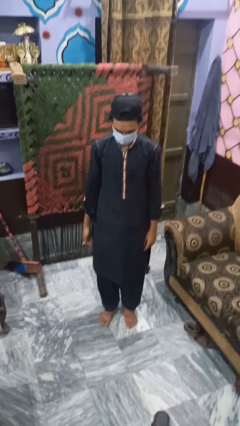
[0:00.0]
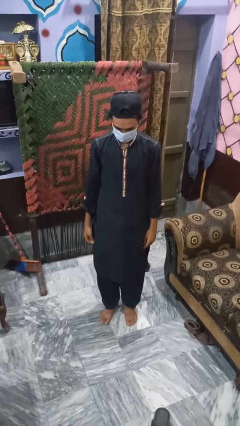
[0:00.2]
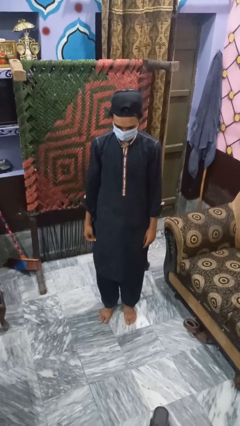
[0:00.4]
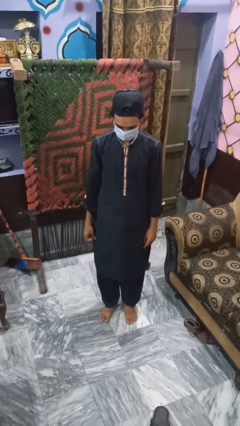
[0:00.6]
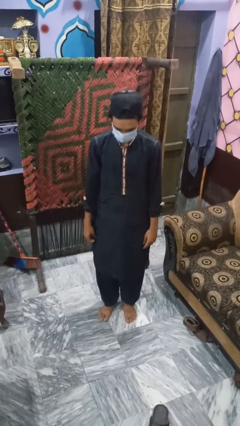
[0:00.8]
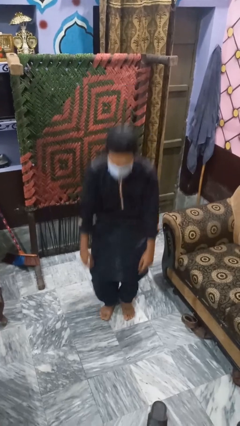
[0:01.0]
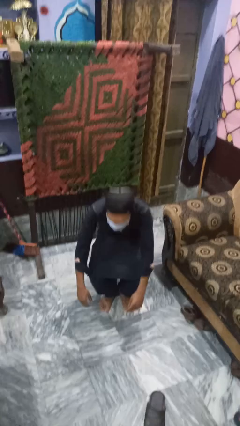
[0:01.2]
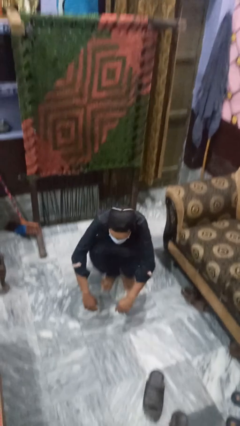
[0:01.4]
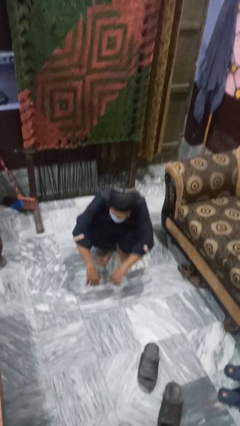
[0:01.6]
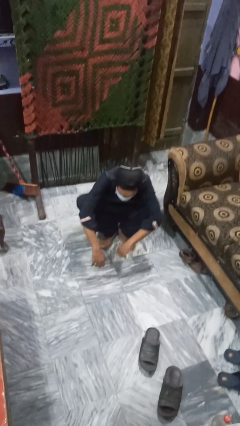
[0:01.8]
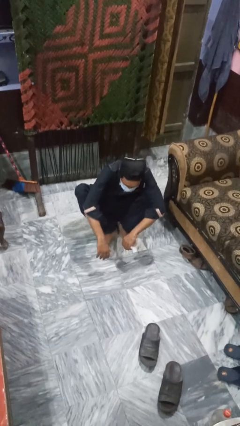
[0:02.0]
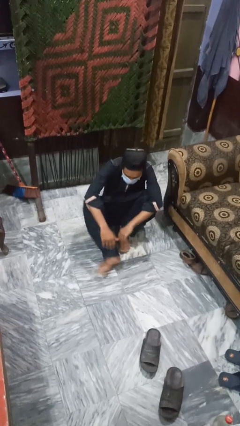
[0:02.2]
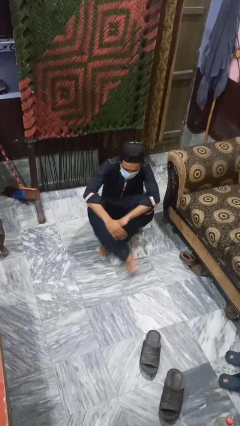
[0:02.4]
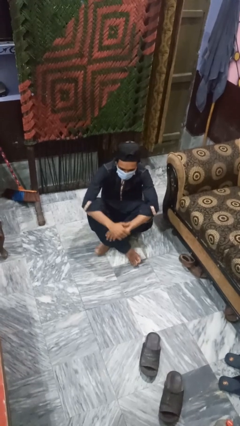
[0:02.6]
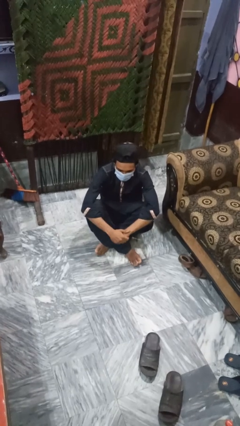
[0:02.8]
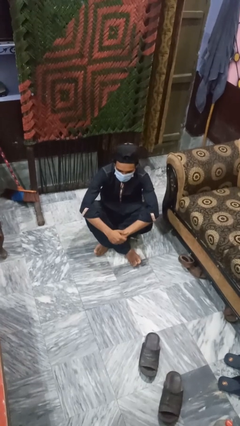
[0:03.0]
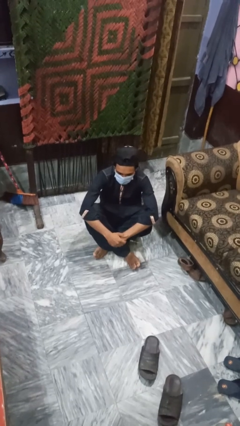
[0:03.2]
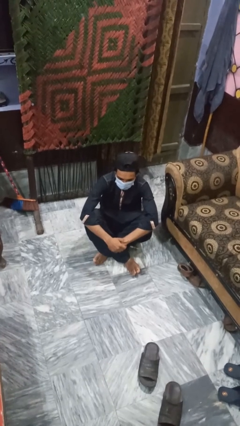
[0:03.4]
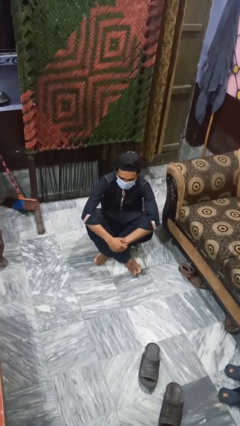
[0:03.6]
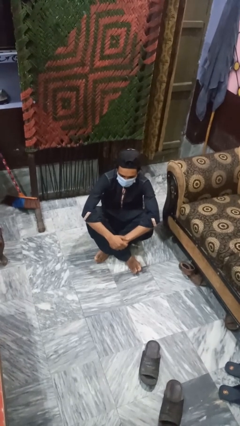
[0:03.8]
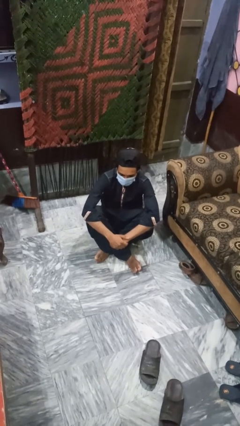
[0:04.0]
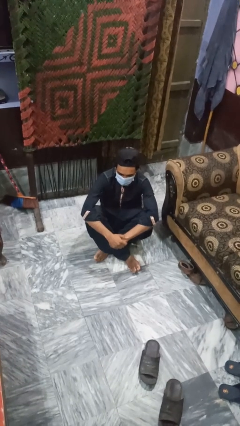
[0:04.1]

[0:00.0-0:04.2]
person sits crisscross

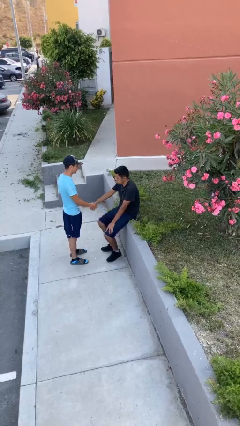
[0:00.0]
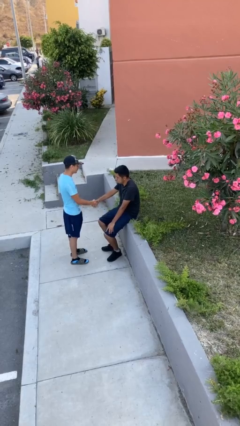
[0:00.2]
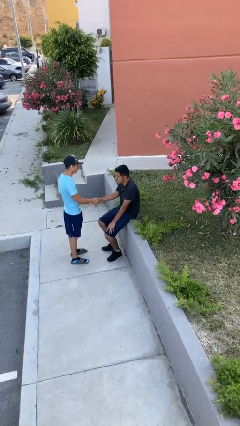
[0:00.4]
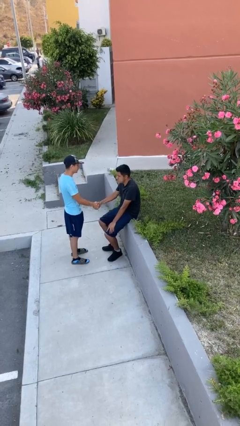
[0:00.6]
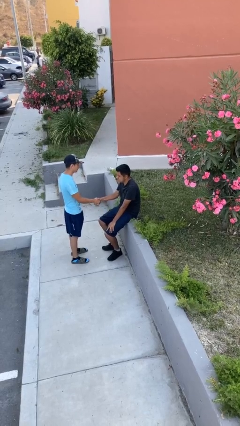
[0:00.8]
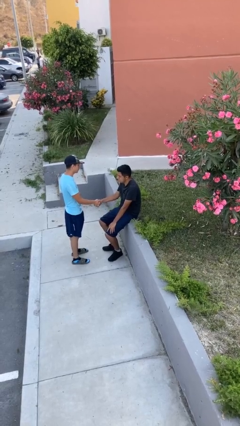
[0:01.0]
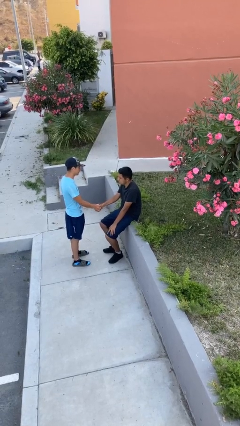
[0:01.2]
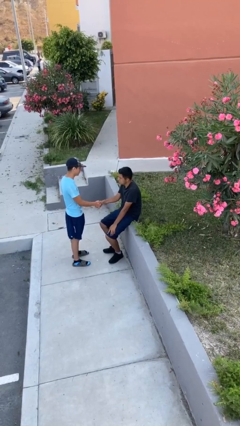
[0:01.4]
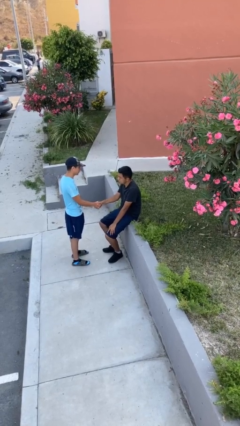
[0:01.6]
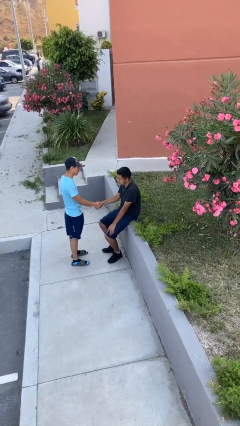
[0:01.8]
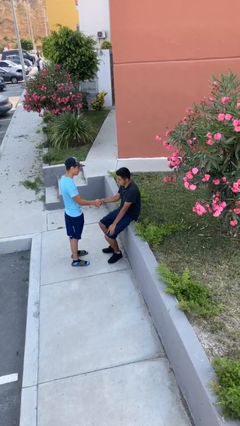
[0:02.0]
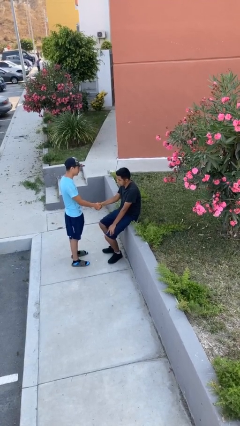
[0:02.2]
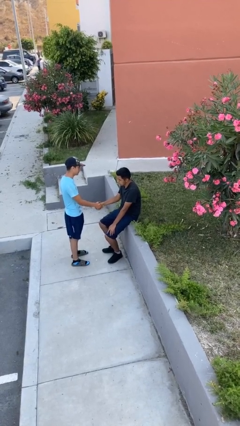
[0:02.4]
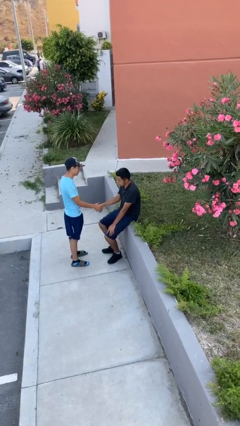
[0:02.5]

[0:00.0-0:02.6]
person shakes hand

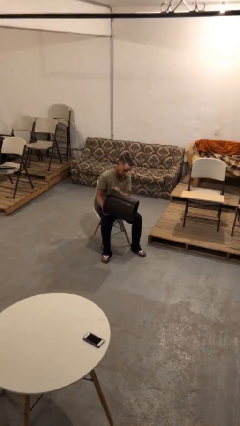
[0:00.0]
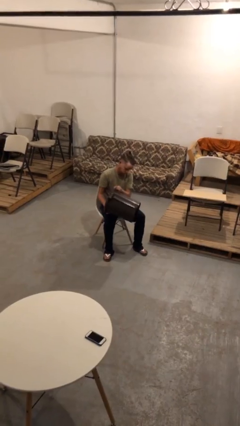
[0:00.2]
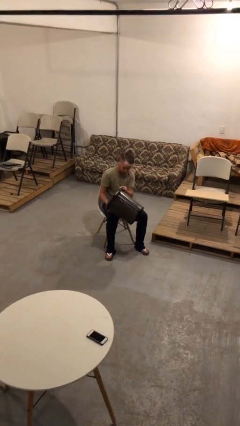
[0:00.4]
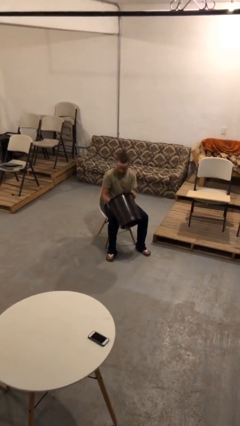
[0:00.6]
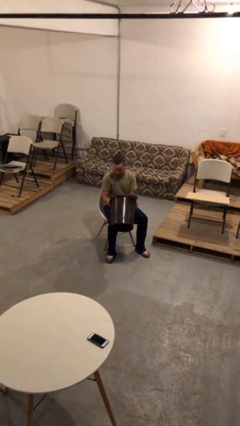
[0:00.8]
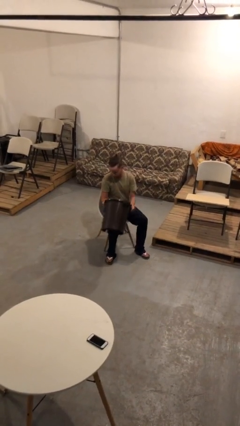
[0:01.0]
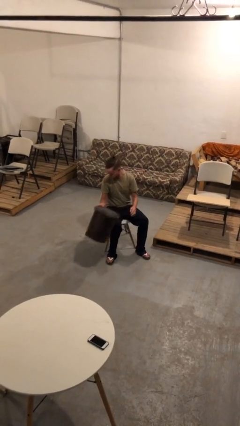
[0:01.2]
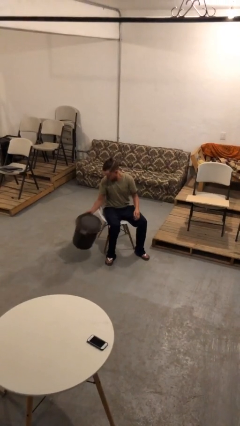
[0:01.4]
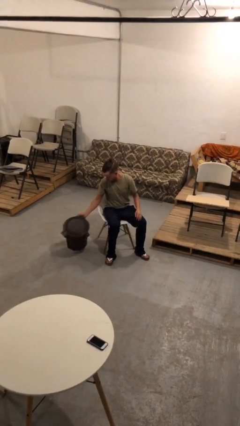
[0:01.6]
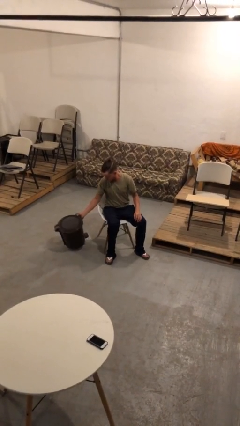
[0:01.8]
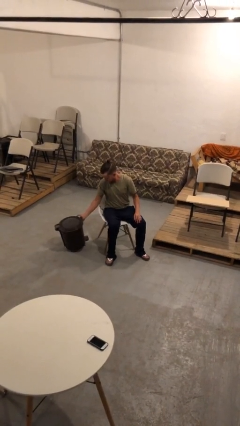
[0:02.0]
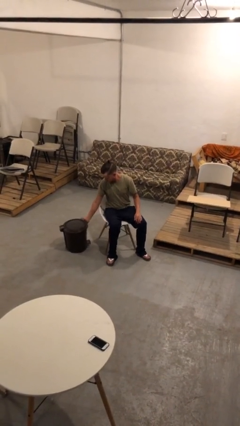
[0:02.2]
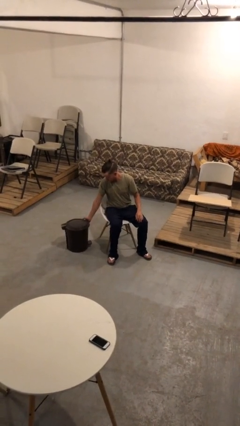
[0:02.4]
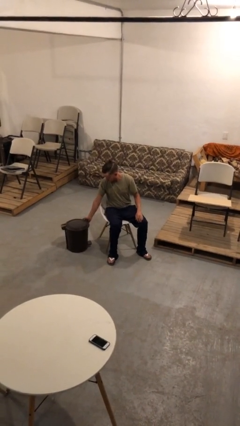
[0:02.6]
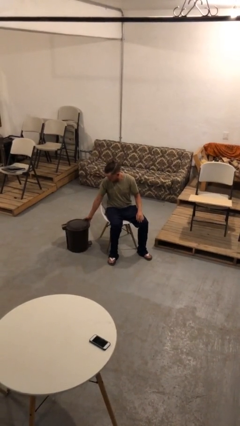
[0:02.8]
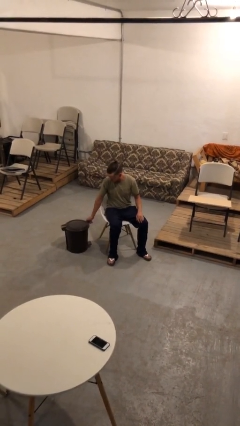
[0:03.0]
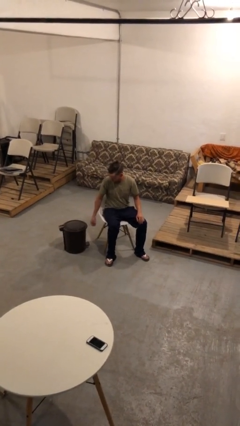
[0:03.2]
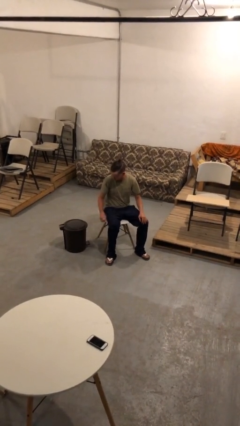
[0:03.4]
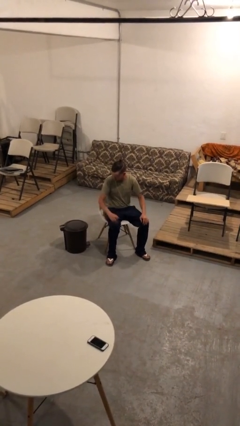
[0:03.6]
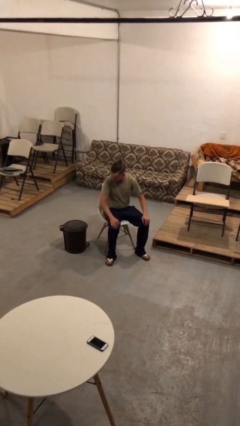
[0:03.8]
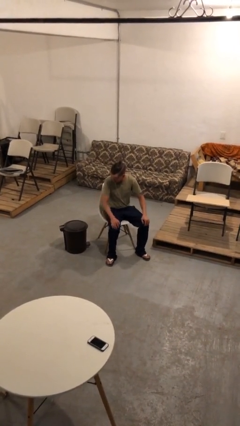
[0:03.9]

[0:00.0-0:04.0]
person puts down object on floor

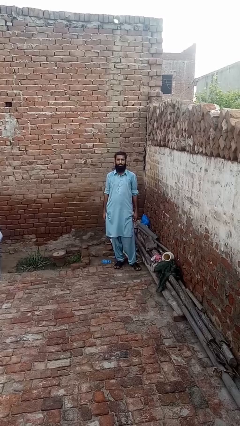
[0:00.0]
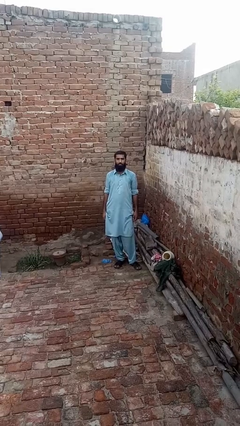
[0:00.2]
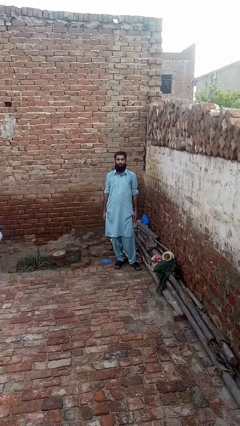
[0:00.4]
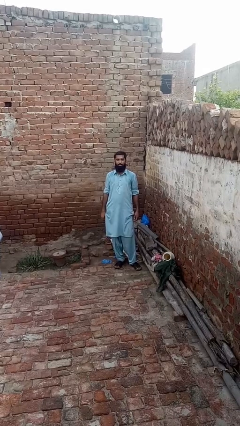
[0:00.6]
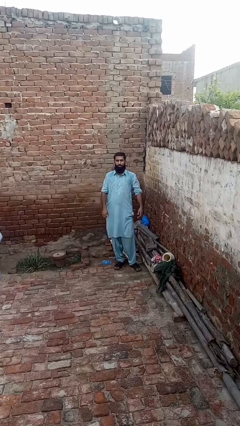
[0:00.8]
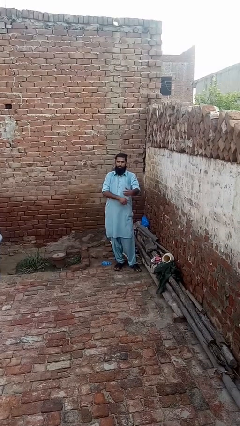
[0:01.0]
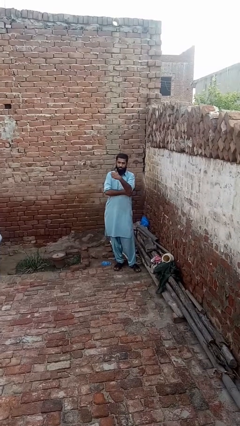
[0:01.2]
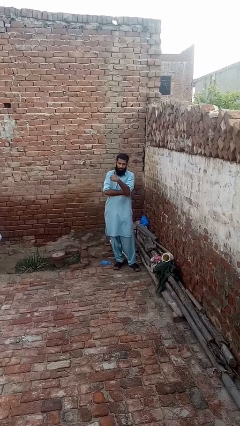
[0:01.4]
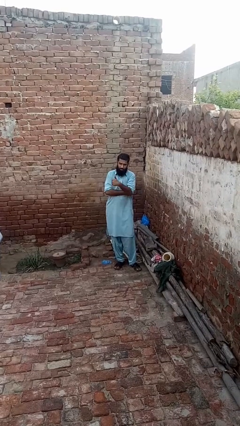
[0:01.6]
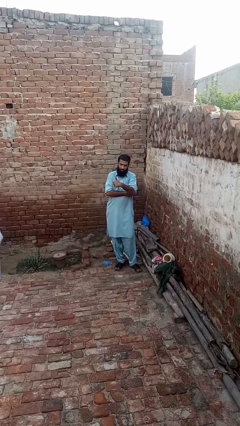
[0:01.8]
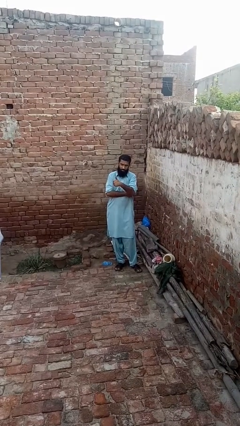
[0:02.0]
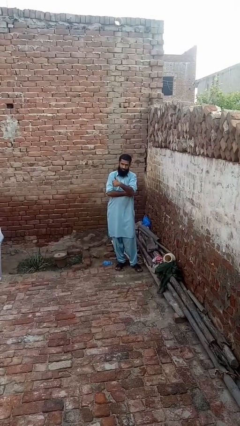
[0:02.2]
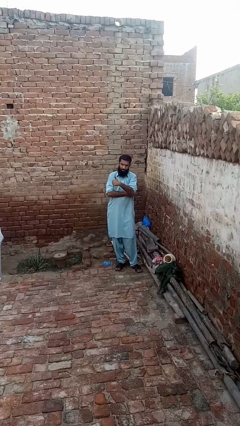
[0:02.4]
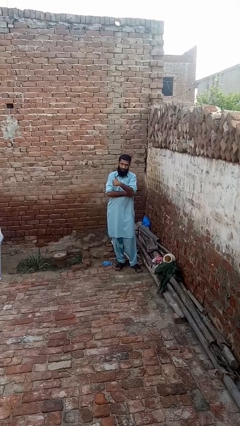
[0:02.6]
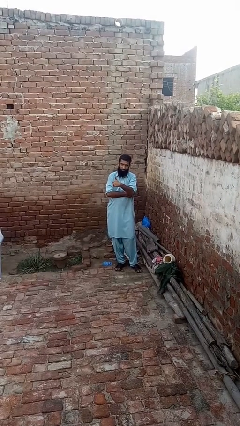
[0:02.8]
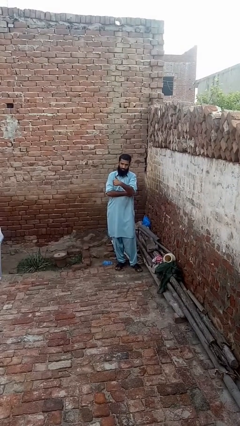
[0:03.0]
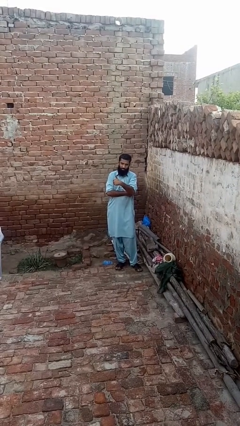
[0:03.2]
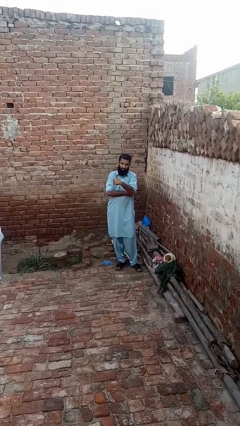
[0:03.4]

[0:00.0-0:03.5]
person gestures thumbs up

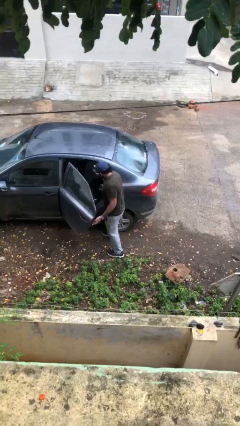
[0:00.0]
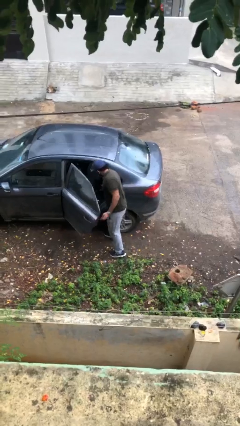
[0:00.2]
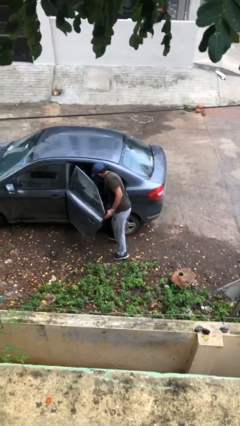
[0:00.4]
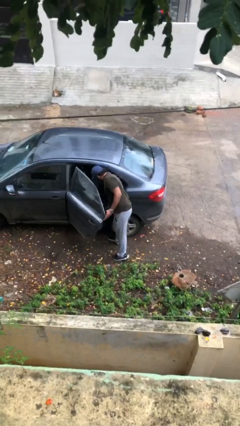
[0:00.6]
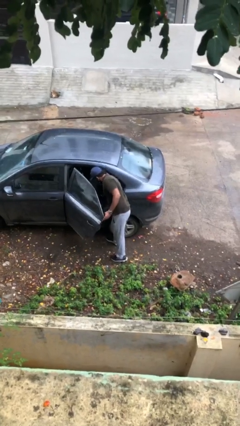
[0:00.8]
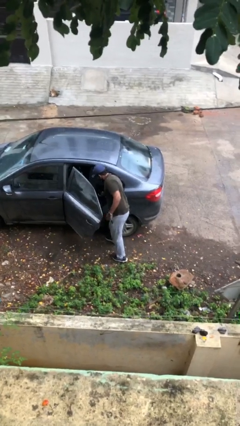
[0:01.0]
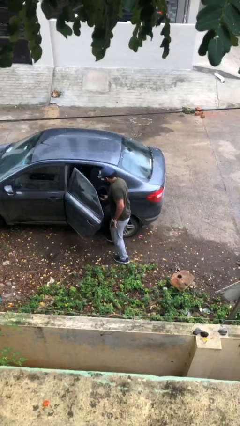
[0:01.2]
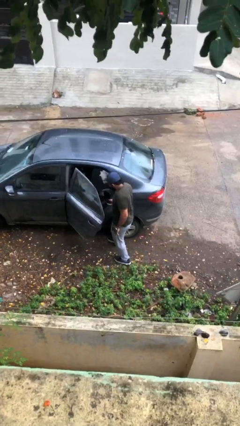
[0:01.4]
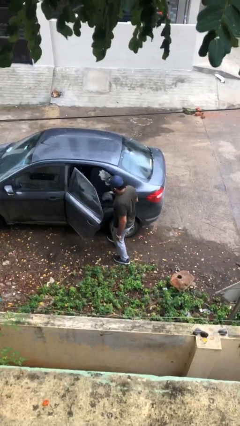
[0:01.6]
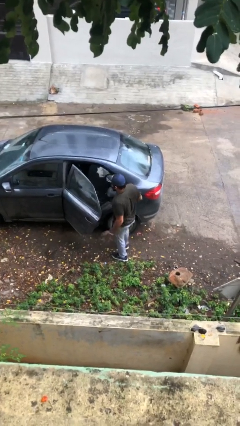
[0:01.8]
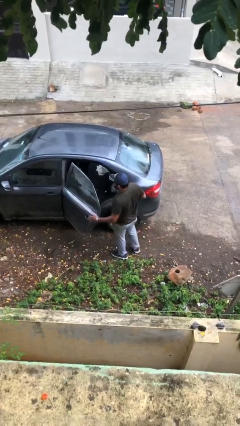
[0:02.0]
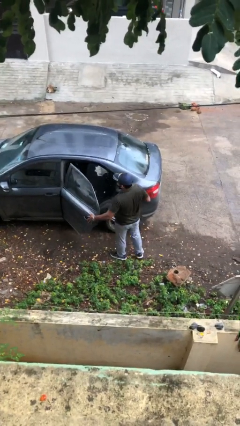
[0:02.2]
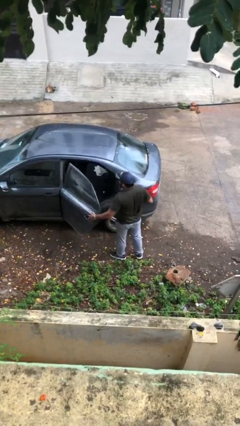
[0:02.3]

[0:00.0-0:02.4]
person unloads car

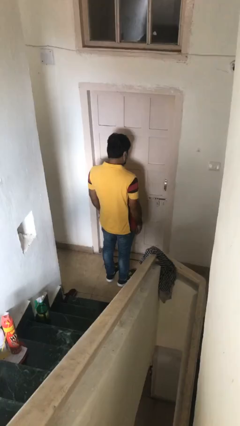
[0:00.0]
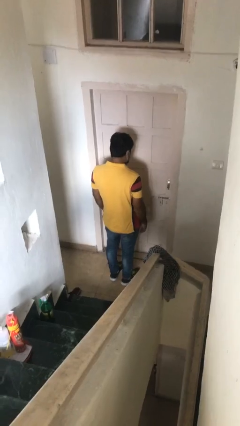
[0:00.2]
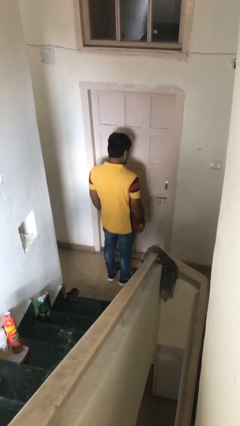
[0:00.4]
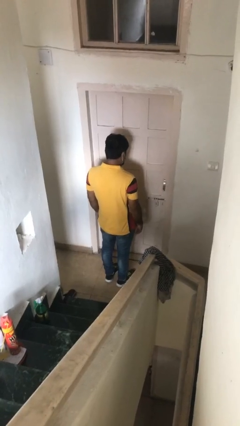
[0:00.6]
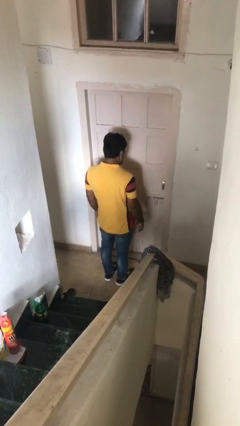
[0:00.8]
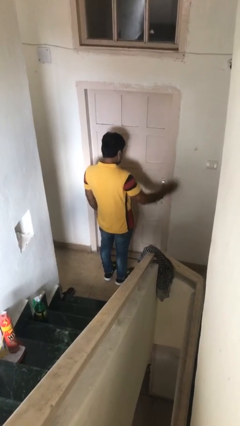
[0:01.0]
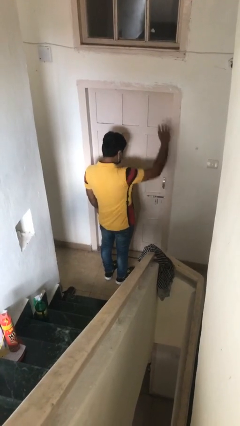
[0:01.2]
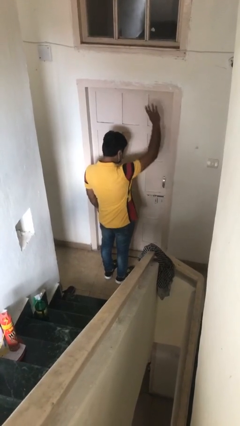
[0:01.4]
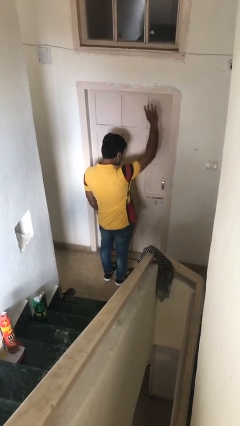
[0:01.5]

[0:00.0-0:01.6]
person gestures raise hand
